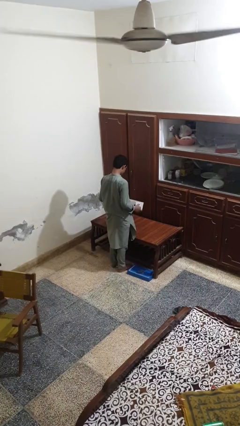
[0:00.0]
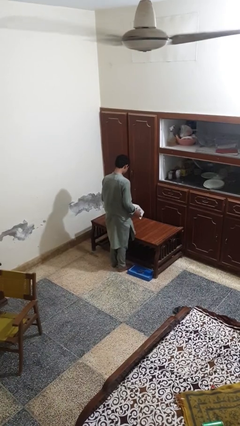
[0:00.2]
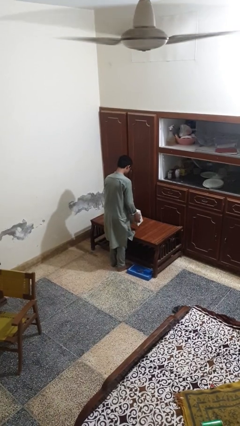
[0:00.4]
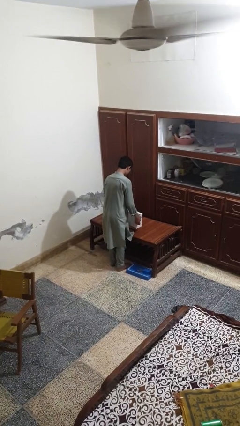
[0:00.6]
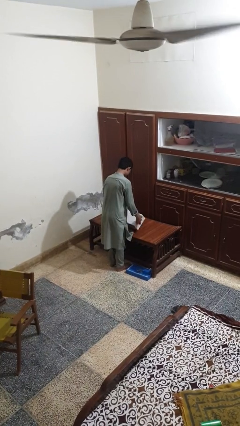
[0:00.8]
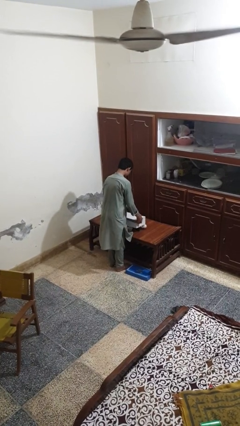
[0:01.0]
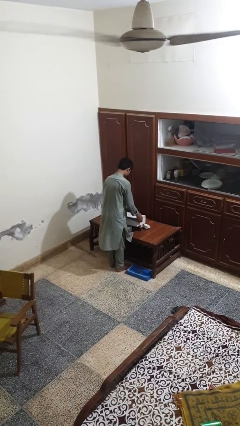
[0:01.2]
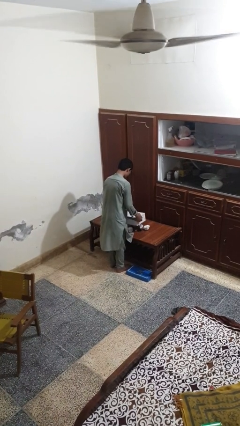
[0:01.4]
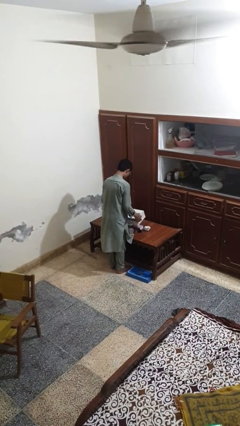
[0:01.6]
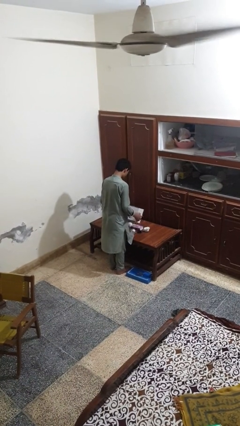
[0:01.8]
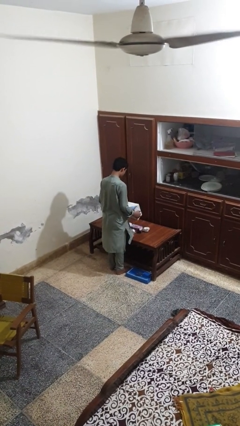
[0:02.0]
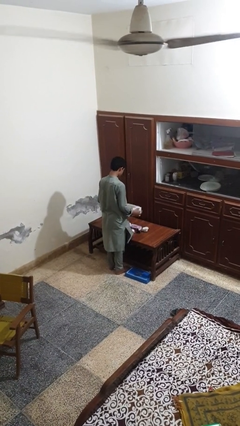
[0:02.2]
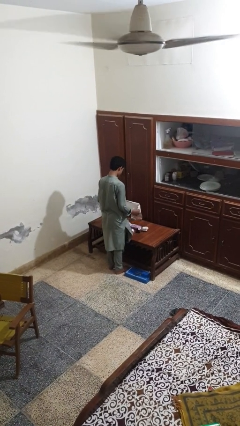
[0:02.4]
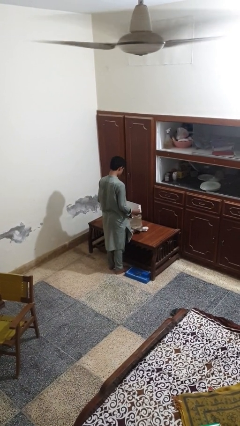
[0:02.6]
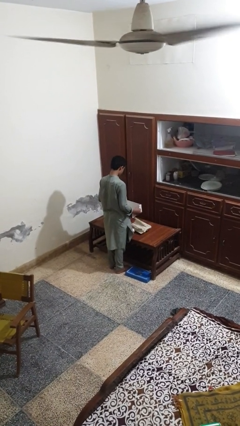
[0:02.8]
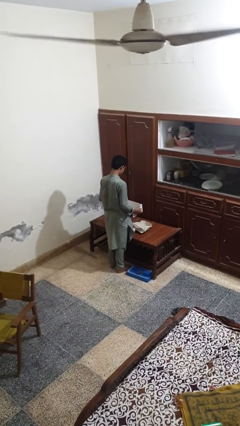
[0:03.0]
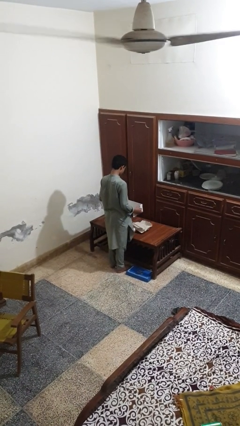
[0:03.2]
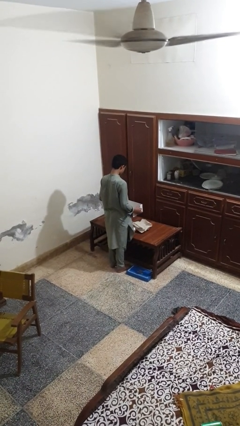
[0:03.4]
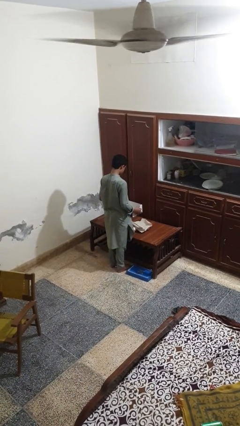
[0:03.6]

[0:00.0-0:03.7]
person unloads box onto table

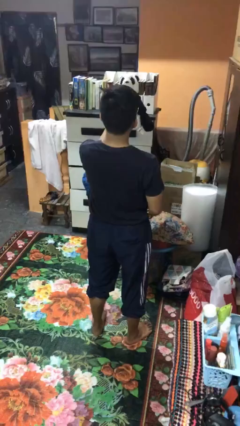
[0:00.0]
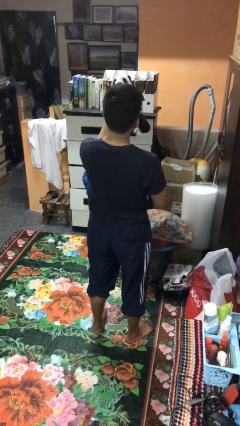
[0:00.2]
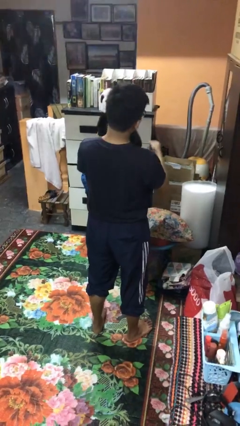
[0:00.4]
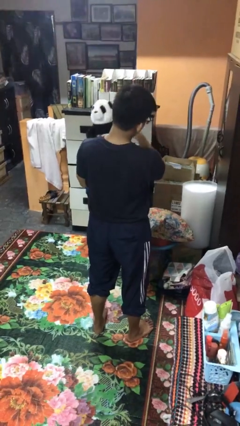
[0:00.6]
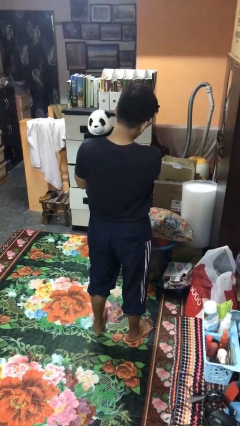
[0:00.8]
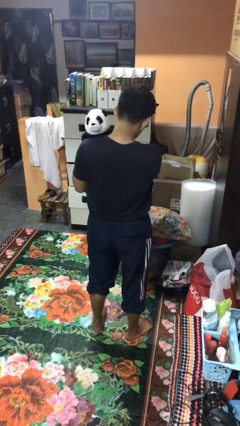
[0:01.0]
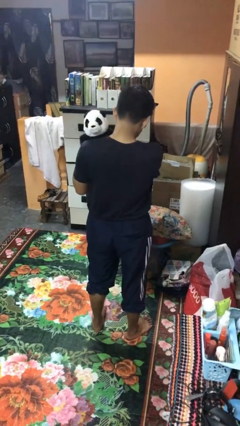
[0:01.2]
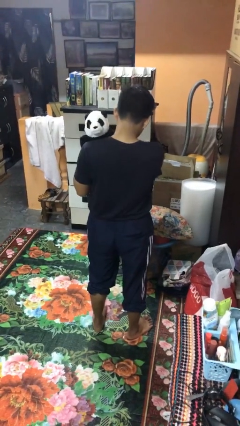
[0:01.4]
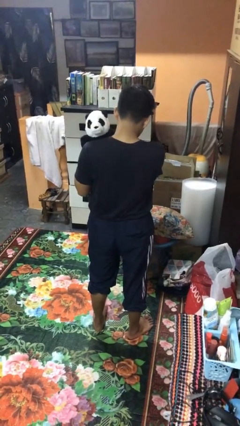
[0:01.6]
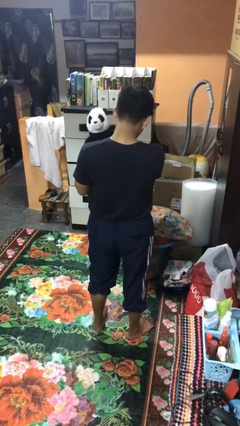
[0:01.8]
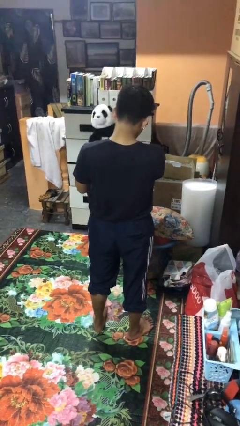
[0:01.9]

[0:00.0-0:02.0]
person hugs stuffed animal

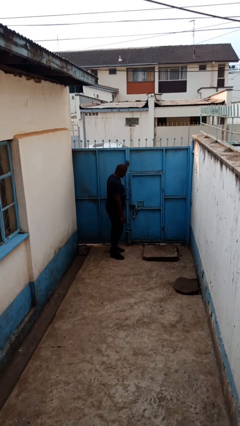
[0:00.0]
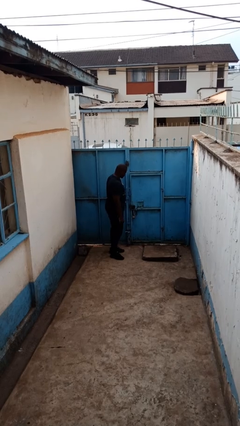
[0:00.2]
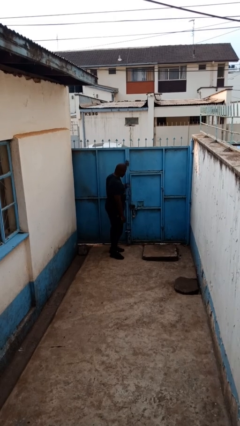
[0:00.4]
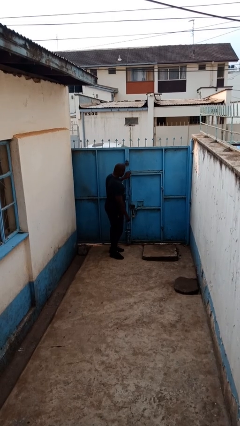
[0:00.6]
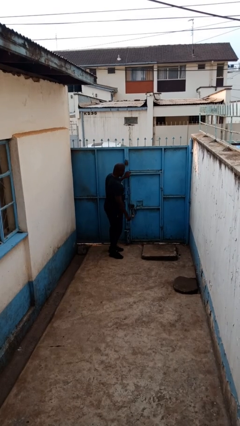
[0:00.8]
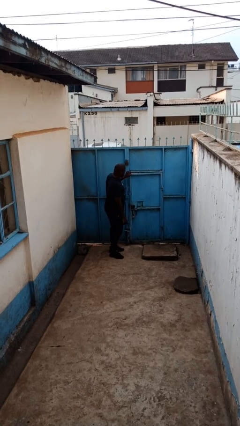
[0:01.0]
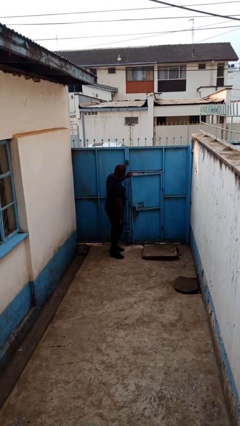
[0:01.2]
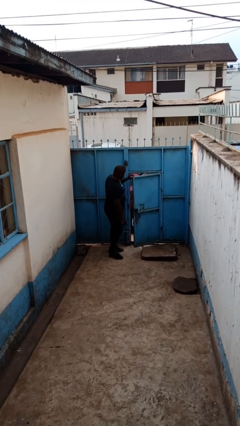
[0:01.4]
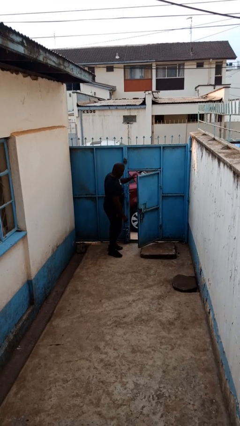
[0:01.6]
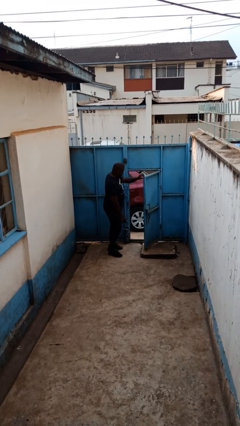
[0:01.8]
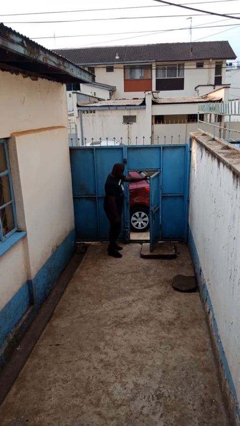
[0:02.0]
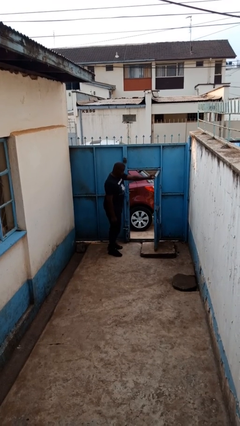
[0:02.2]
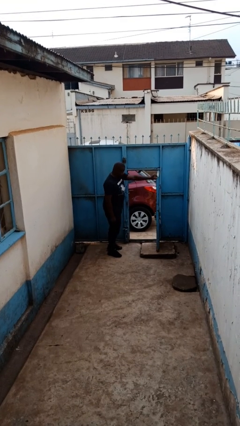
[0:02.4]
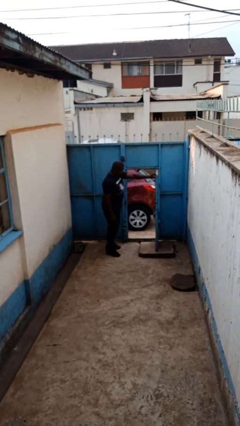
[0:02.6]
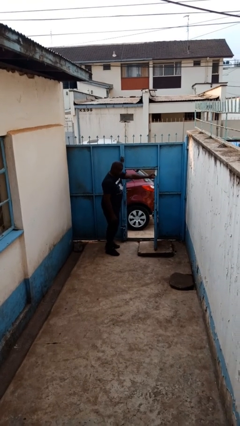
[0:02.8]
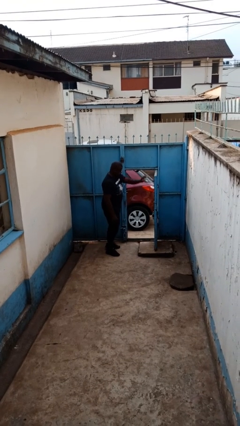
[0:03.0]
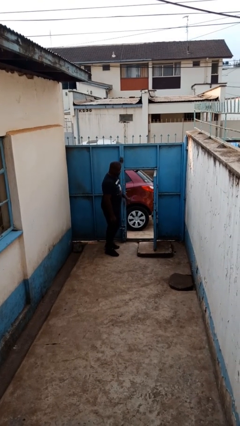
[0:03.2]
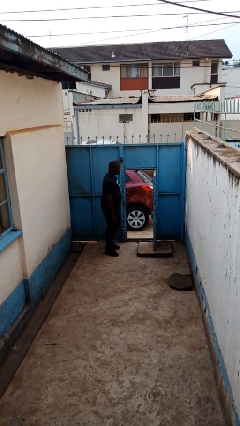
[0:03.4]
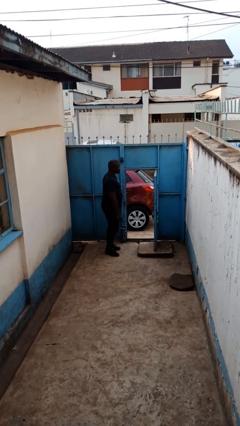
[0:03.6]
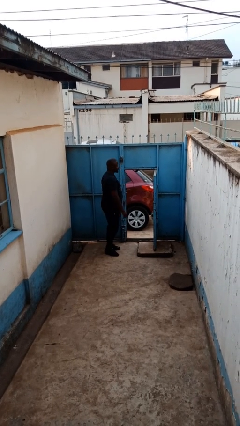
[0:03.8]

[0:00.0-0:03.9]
person opens gate

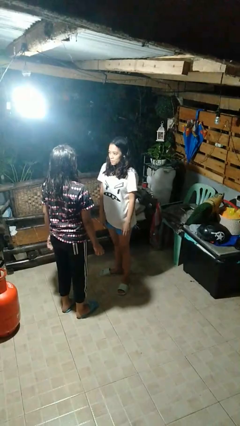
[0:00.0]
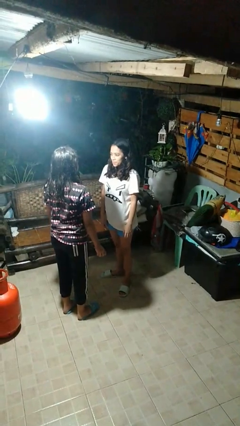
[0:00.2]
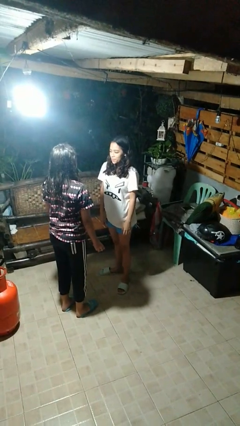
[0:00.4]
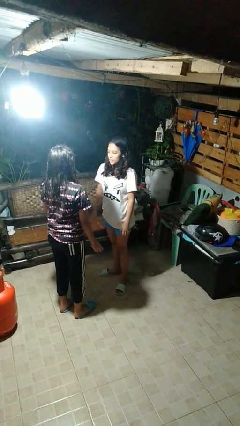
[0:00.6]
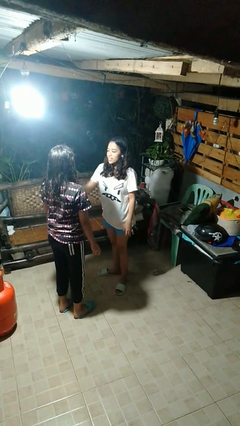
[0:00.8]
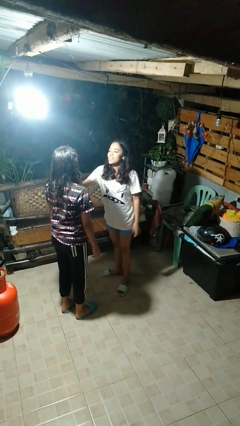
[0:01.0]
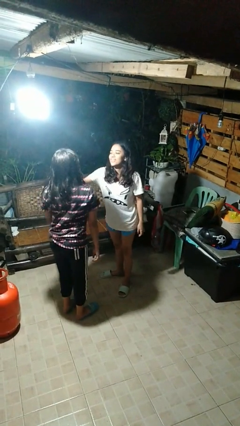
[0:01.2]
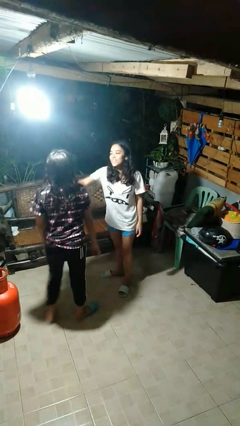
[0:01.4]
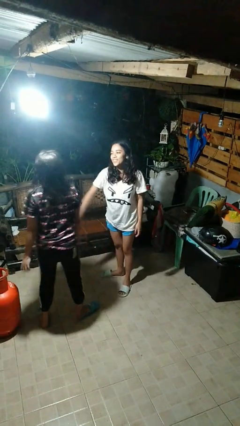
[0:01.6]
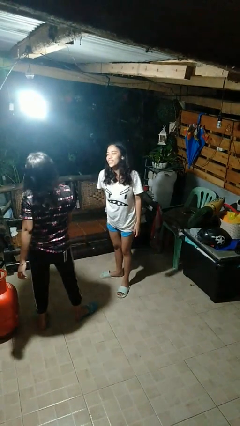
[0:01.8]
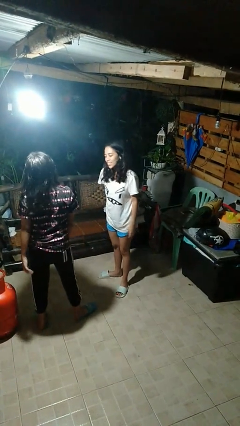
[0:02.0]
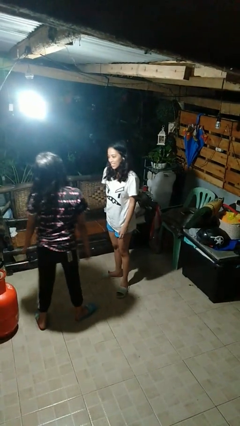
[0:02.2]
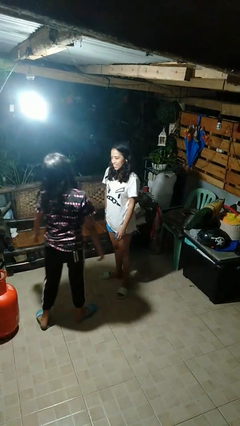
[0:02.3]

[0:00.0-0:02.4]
person shoves person

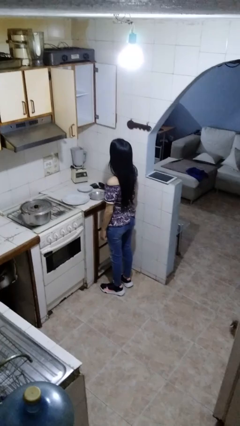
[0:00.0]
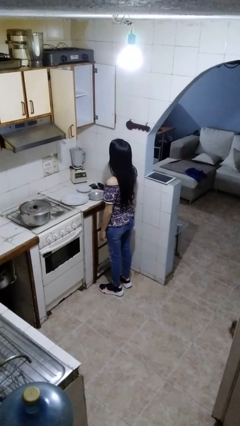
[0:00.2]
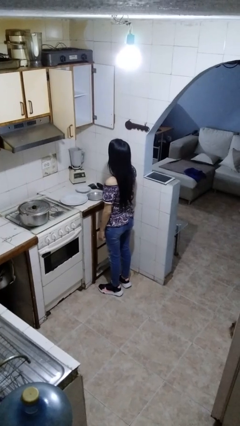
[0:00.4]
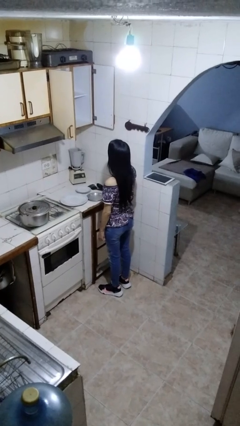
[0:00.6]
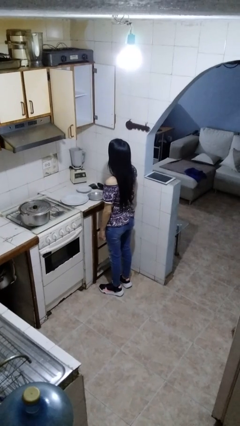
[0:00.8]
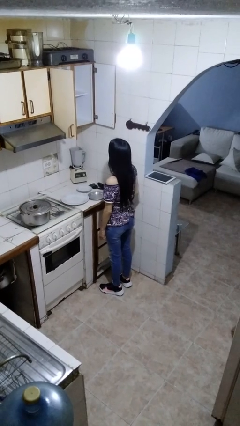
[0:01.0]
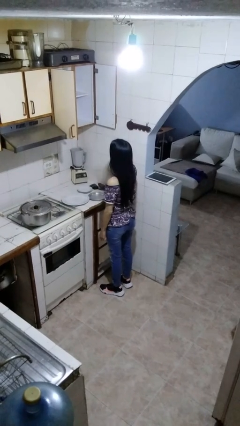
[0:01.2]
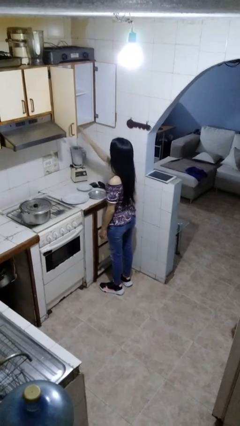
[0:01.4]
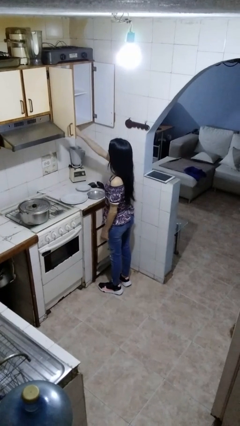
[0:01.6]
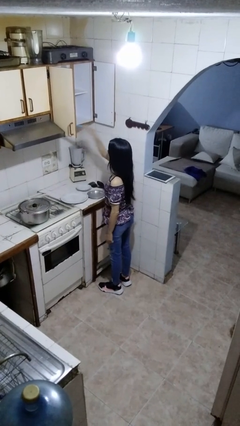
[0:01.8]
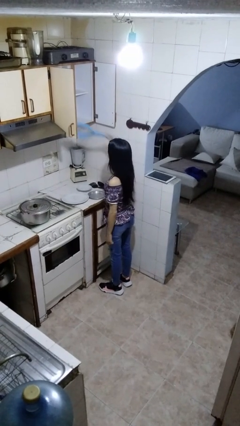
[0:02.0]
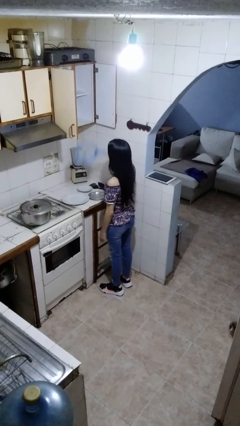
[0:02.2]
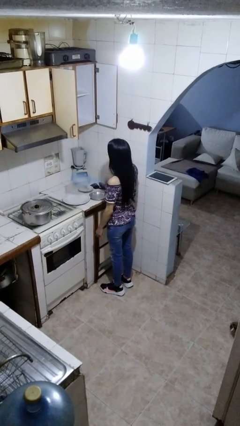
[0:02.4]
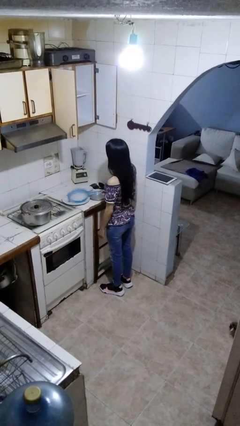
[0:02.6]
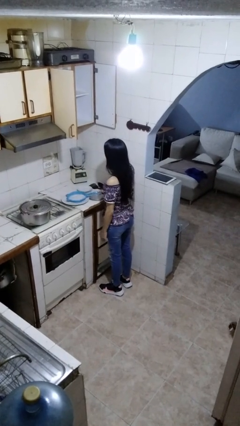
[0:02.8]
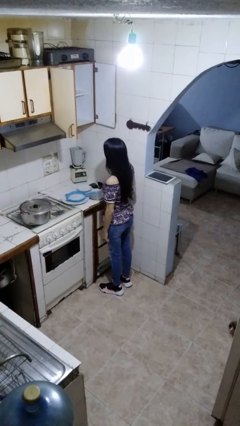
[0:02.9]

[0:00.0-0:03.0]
person takes object from cabinet

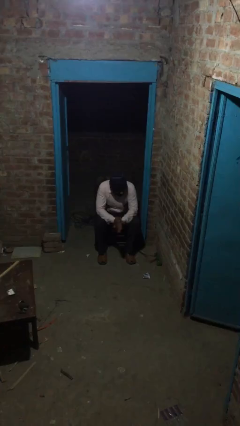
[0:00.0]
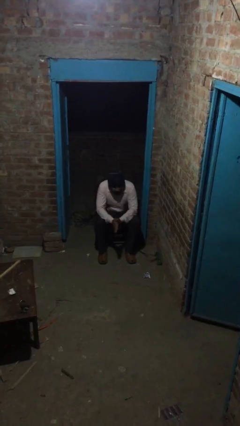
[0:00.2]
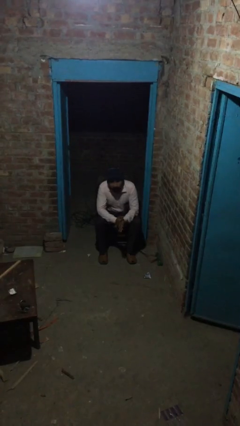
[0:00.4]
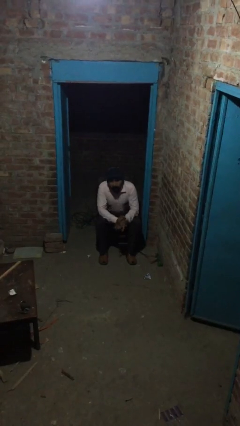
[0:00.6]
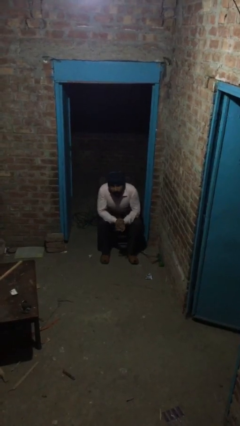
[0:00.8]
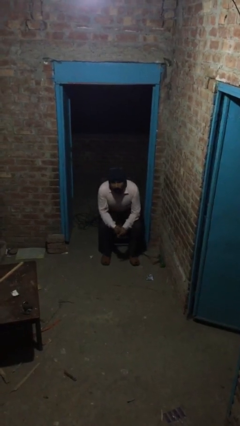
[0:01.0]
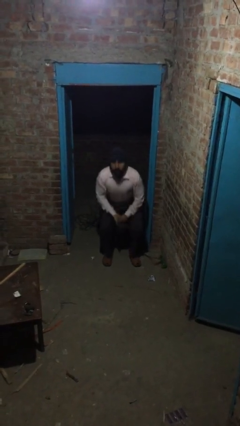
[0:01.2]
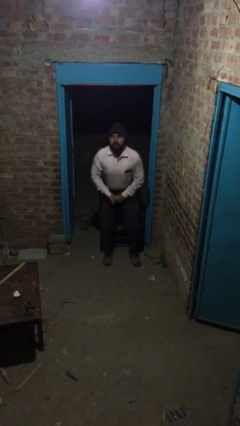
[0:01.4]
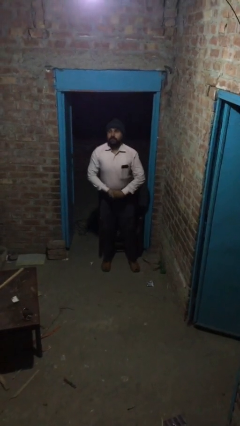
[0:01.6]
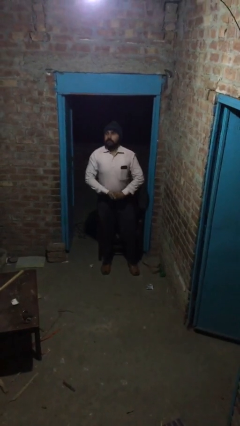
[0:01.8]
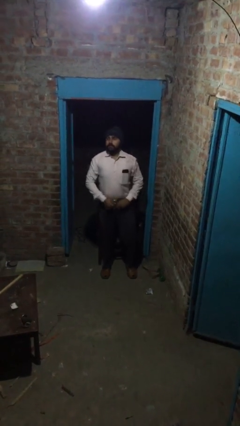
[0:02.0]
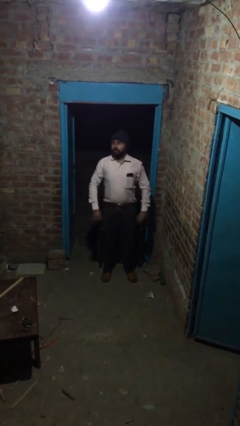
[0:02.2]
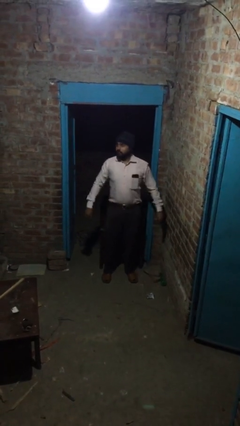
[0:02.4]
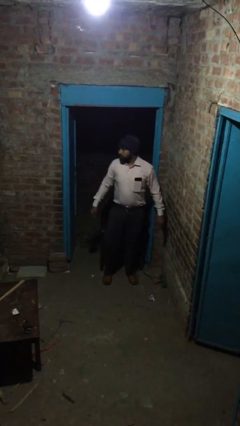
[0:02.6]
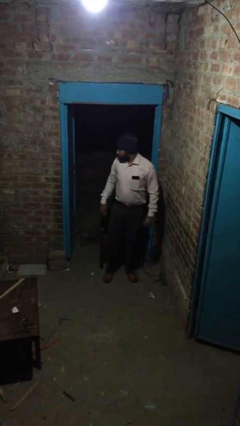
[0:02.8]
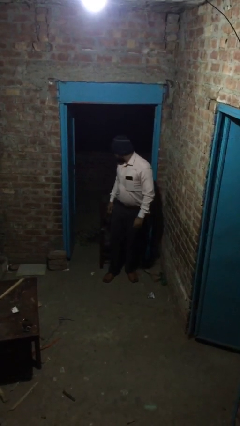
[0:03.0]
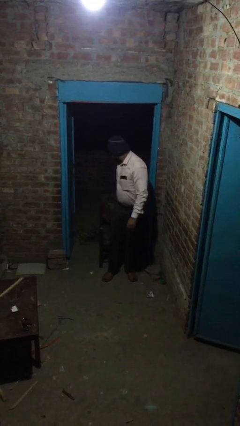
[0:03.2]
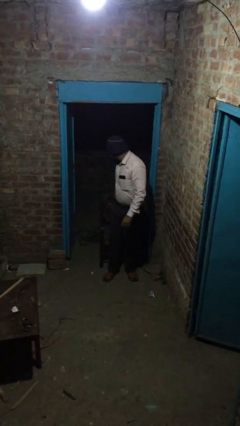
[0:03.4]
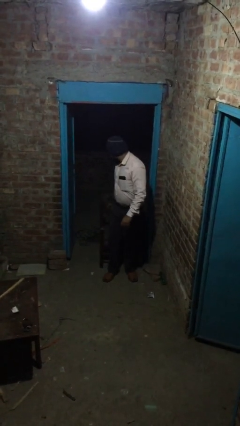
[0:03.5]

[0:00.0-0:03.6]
person stands up
